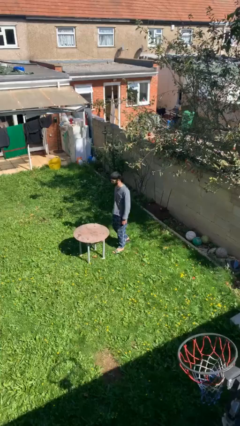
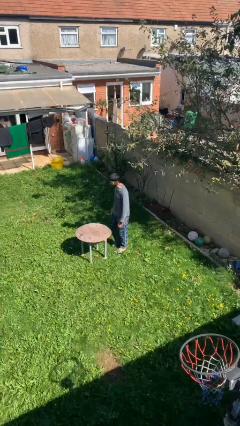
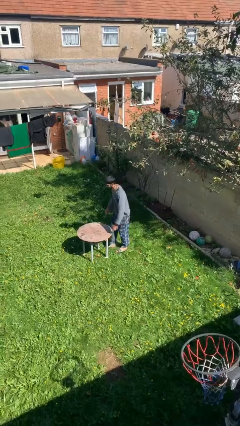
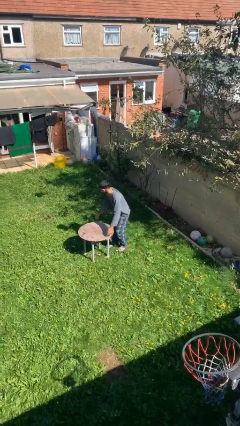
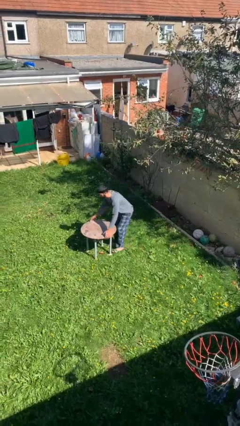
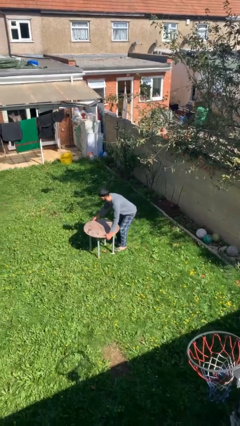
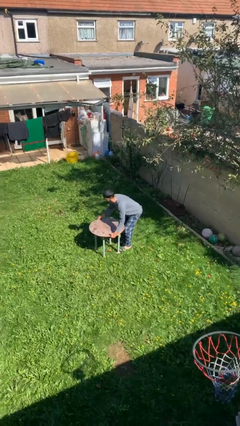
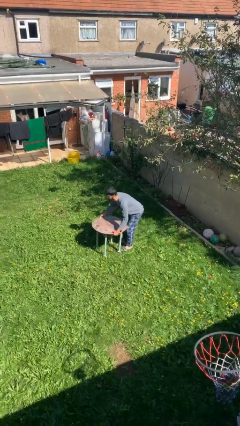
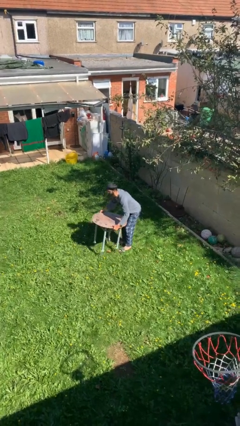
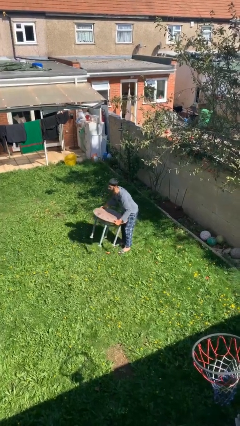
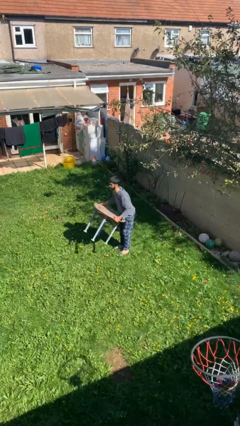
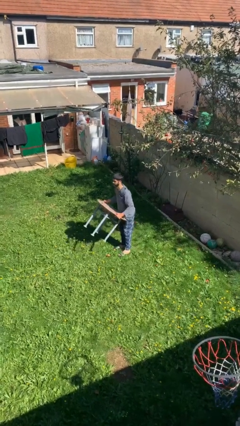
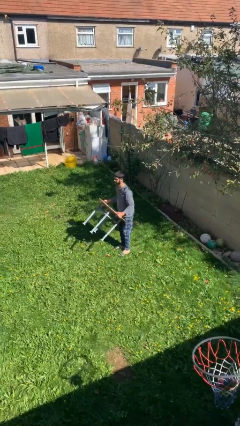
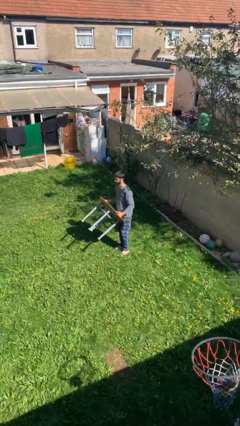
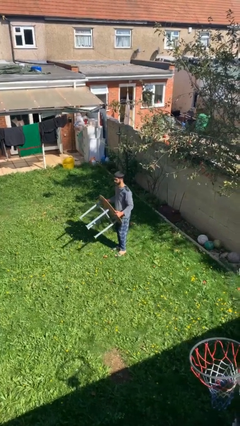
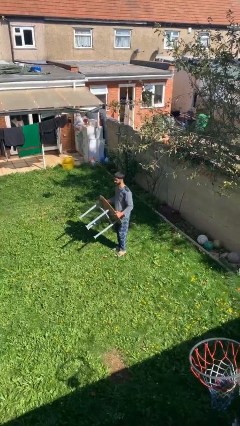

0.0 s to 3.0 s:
person picks up object from floor

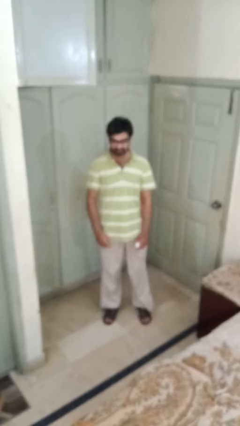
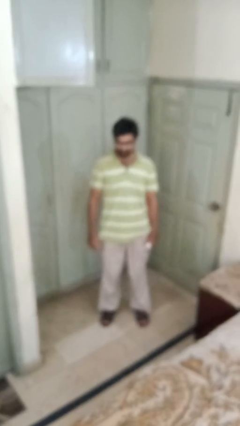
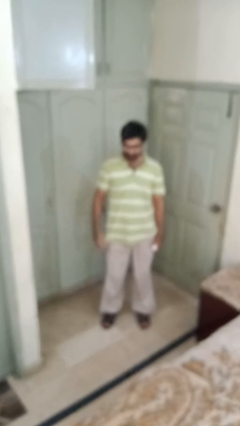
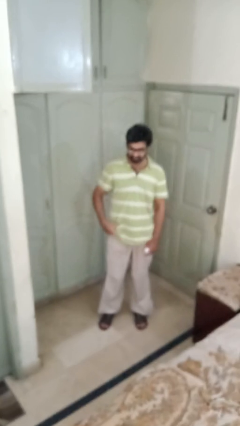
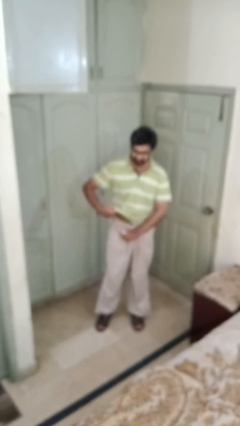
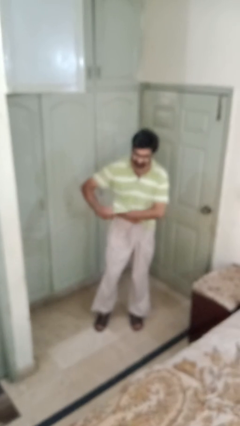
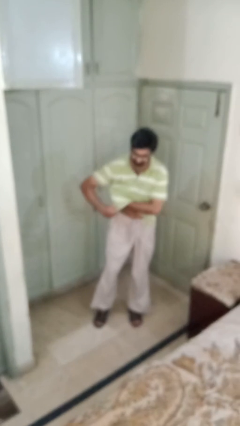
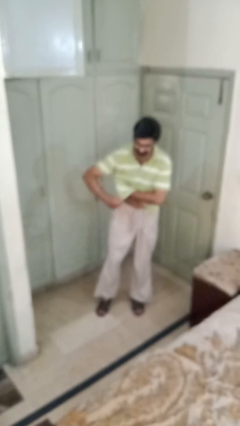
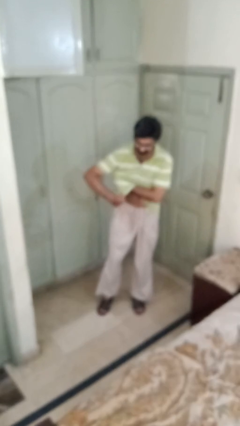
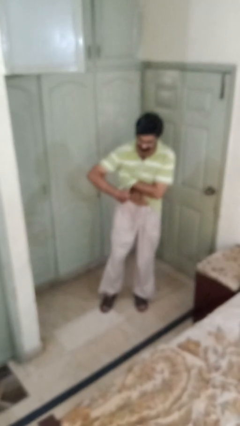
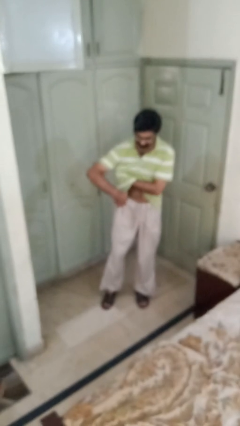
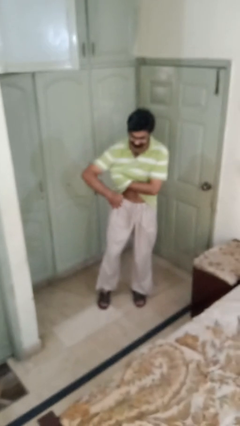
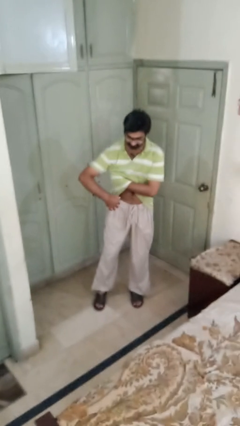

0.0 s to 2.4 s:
person applies deodorant

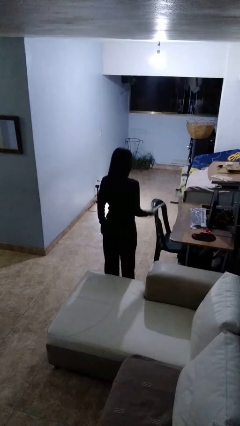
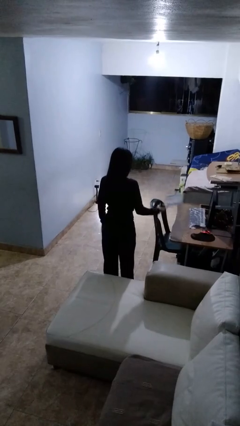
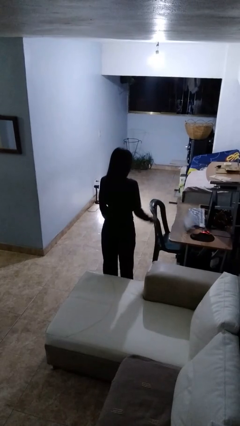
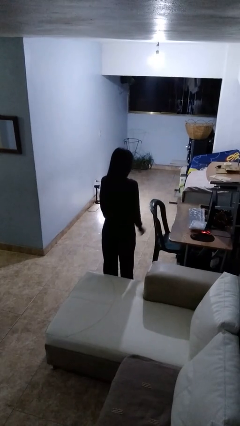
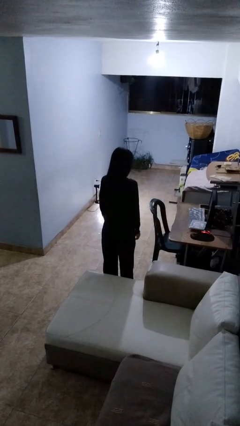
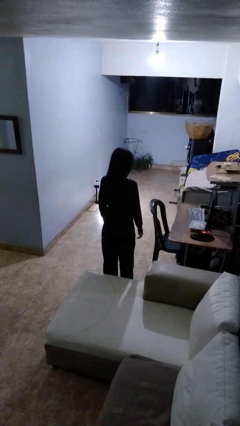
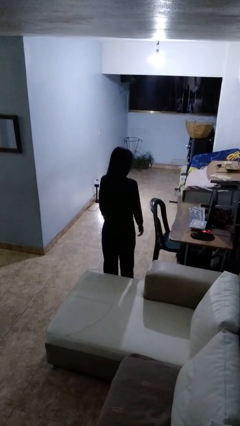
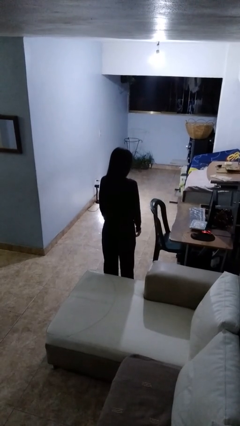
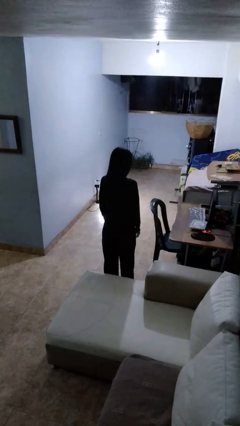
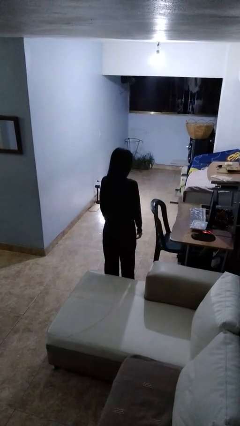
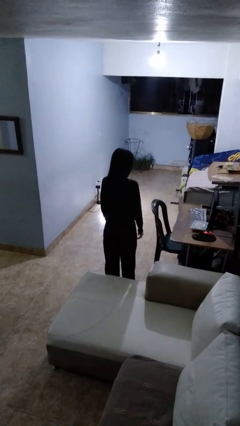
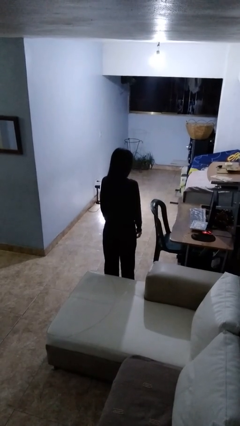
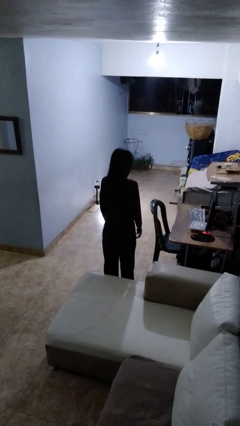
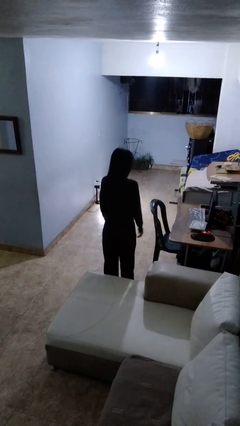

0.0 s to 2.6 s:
person throws object on table

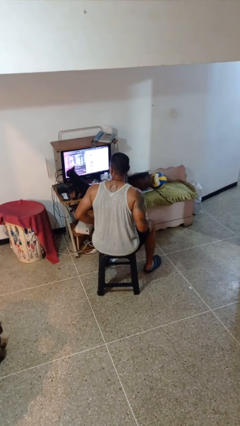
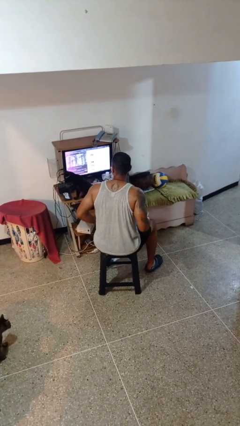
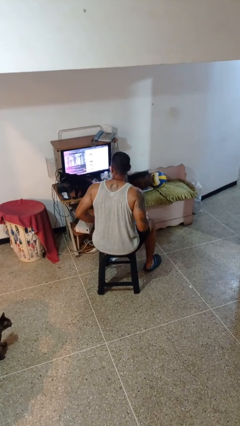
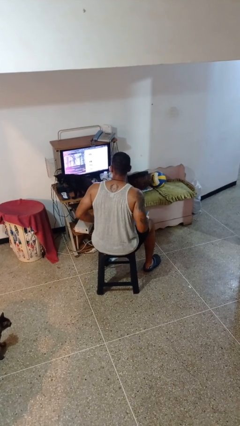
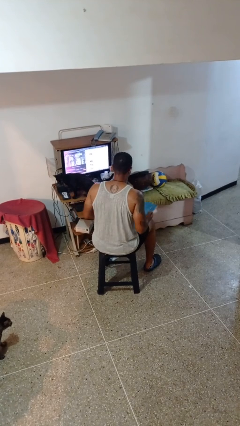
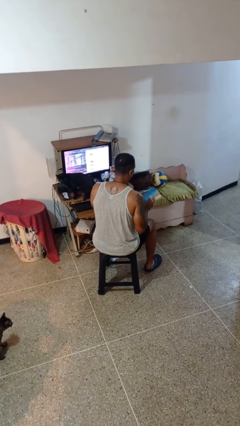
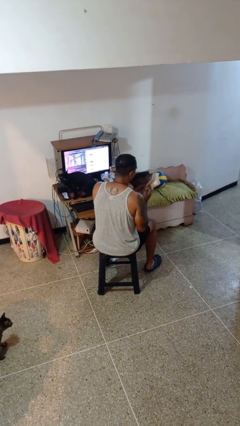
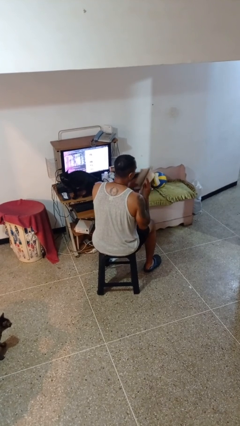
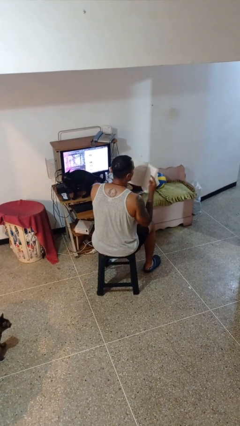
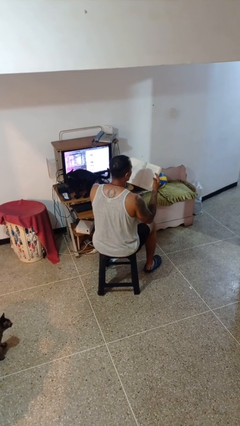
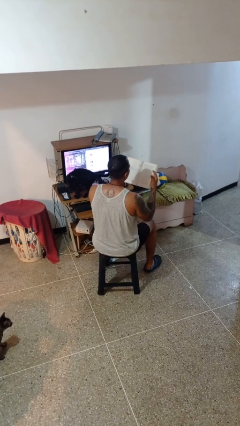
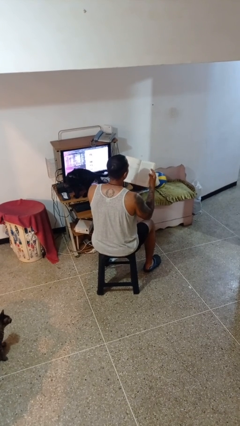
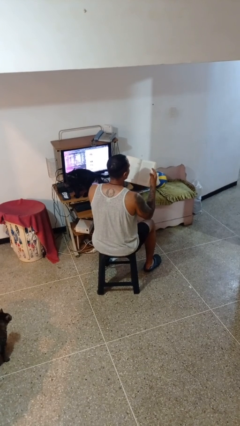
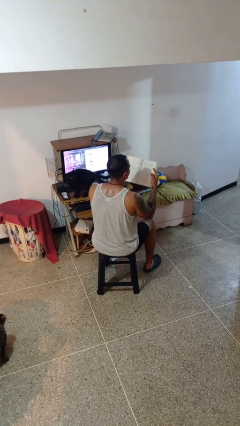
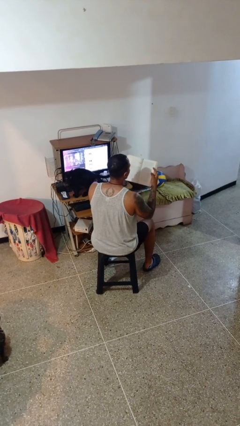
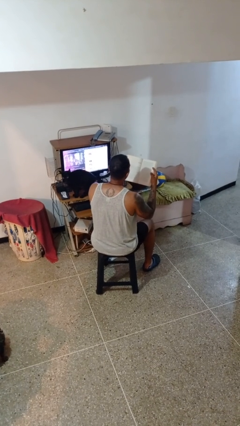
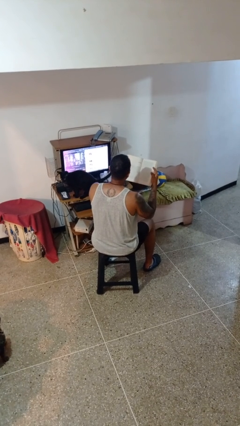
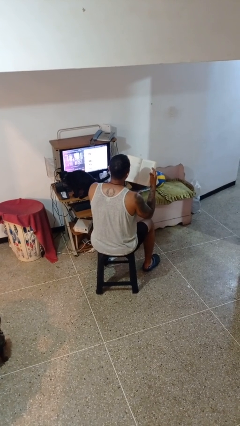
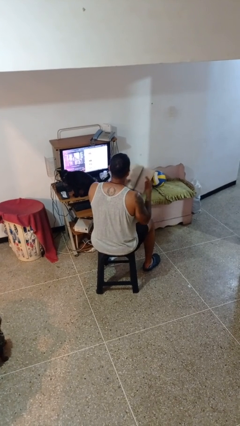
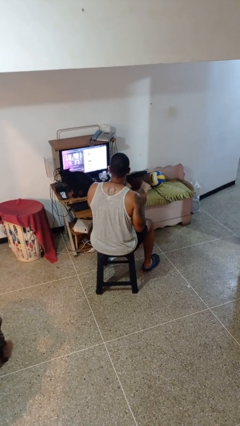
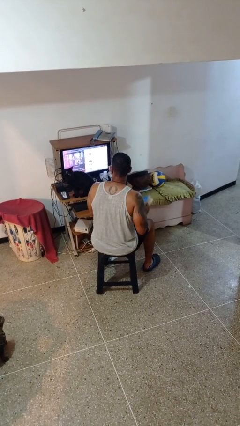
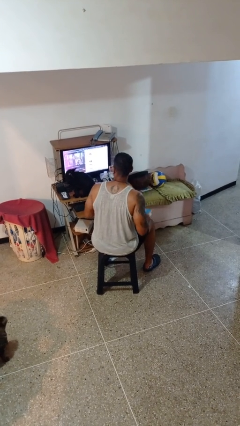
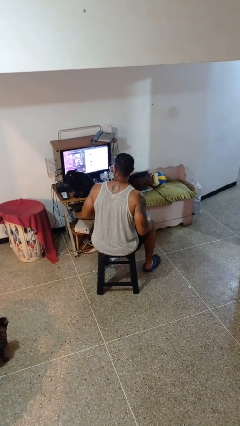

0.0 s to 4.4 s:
person reads book

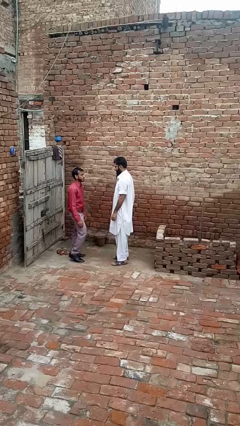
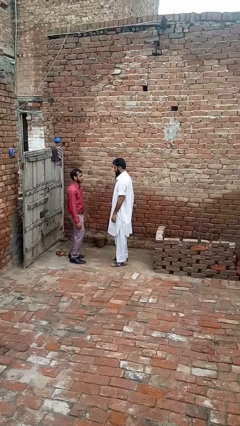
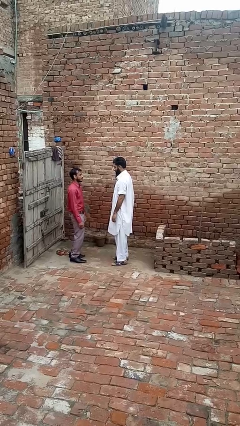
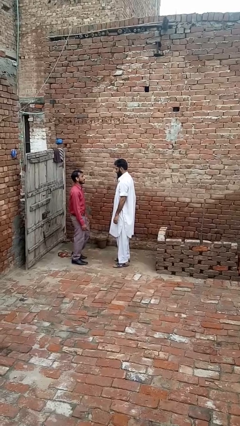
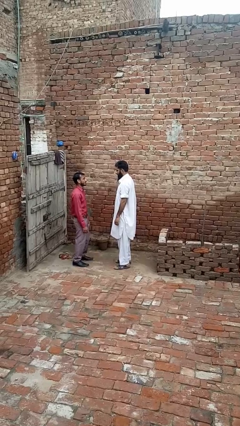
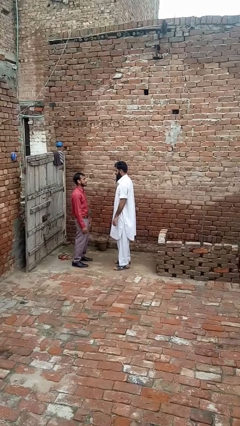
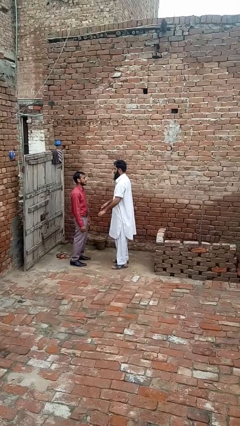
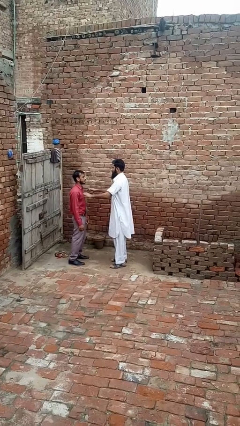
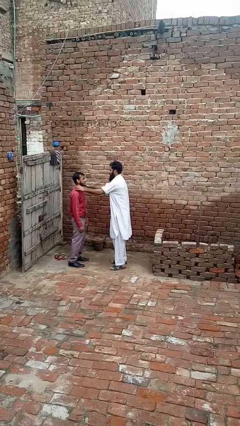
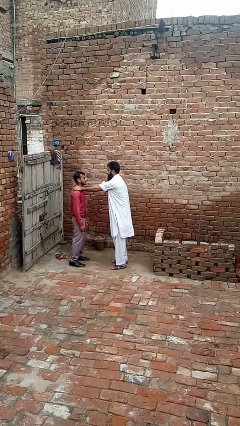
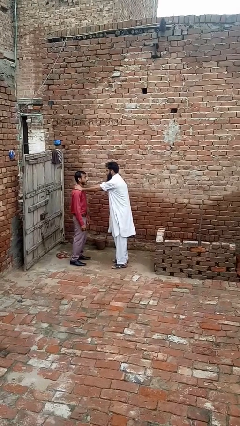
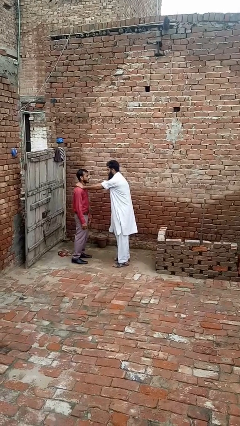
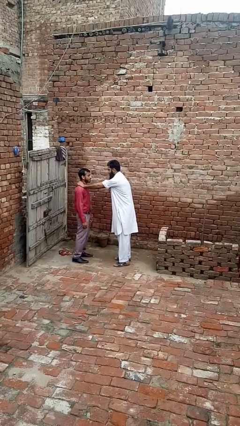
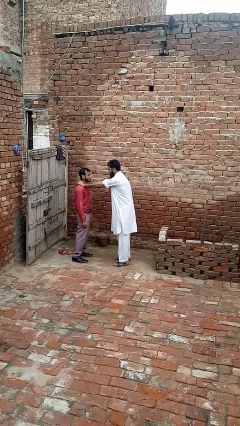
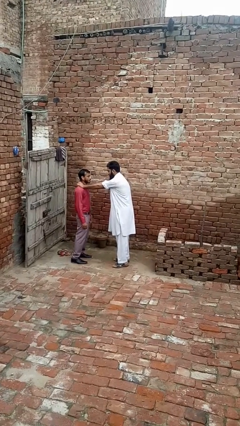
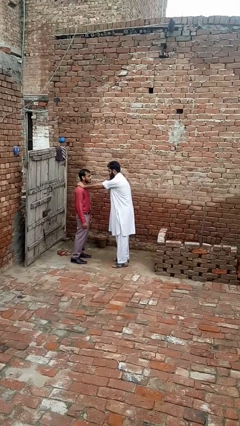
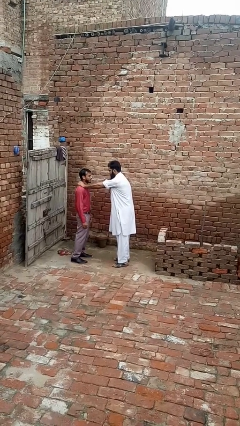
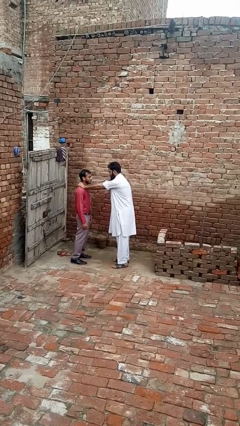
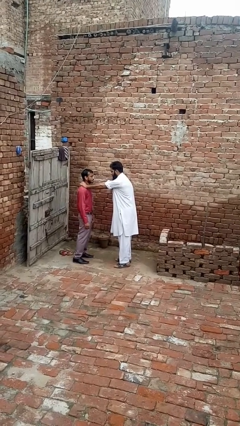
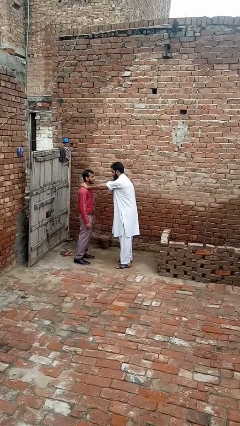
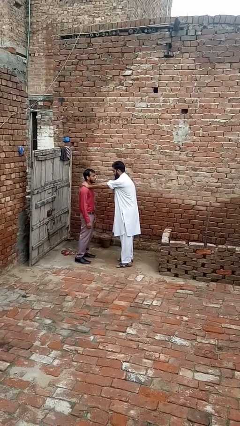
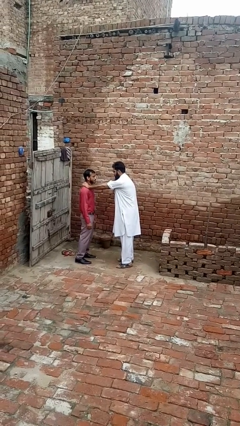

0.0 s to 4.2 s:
person pounds shoulders of person

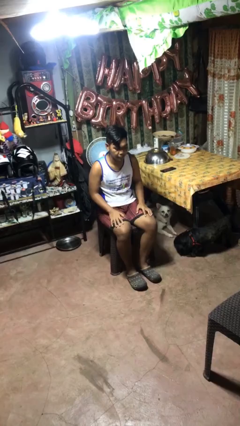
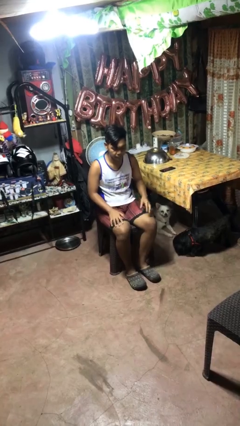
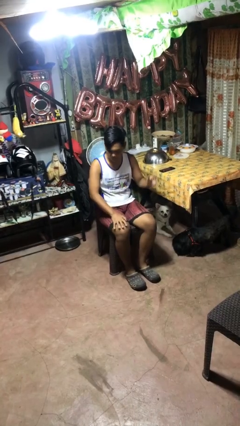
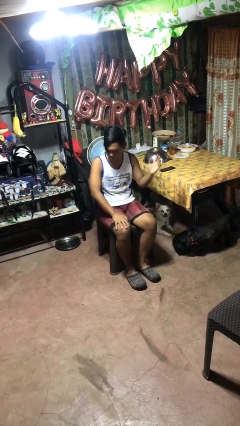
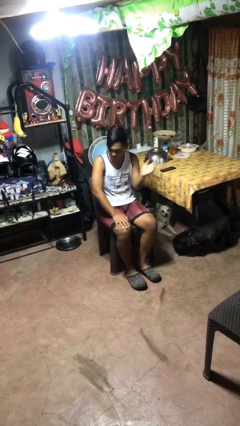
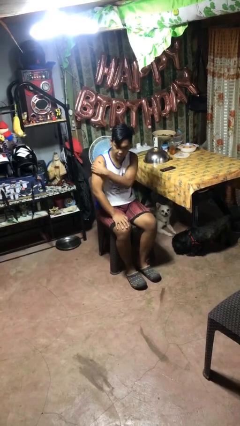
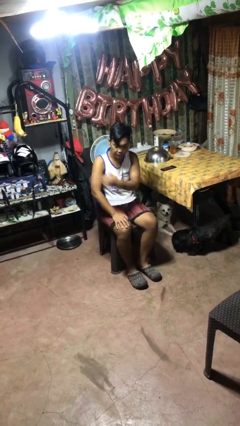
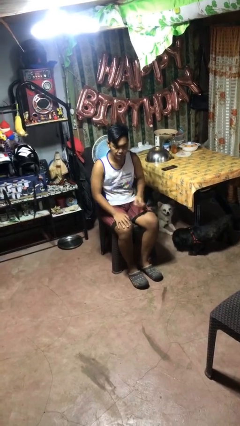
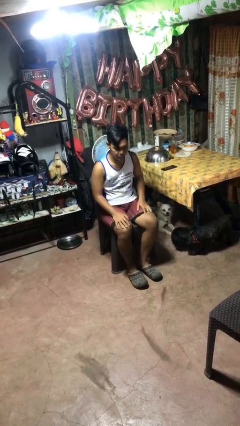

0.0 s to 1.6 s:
person swats bug
